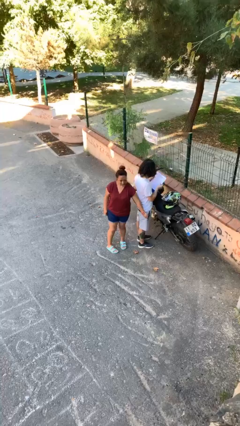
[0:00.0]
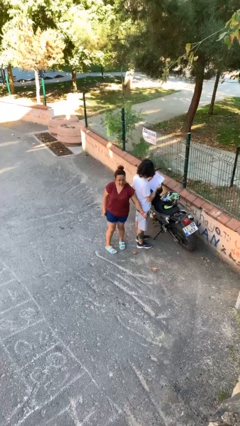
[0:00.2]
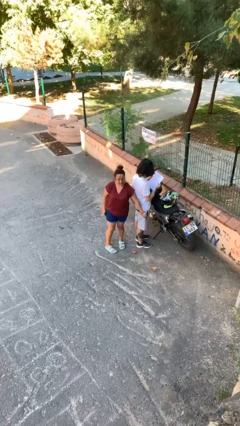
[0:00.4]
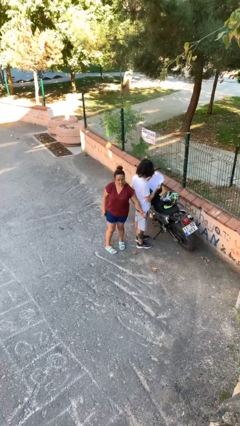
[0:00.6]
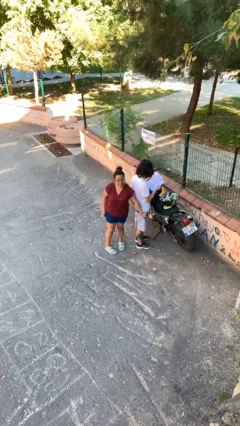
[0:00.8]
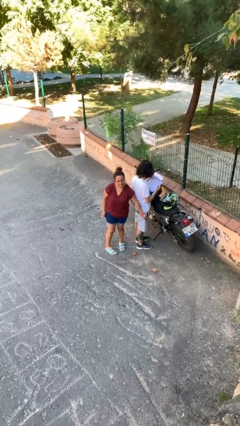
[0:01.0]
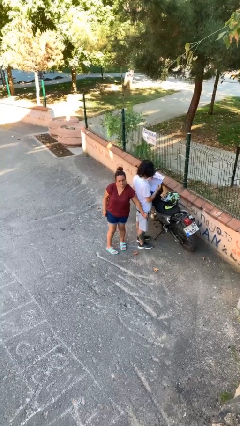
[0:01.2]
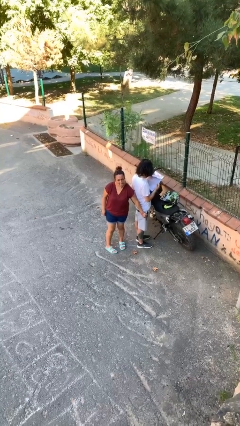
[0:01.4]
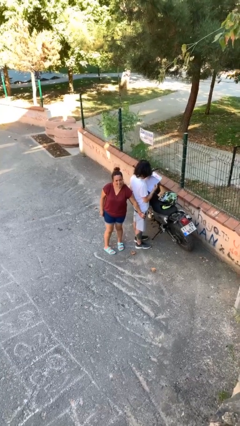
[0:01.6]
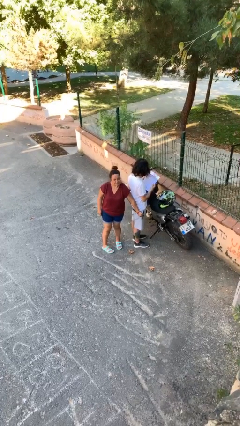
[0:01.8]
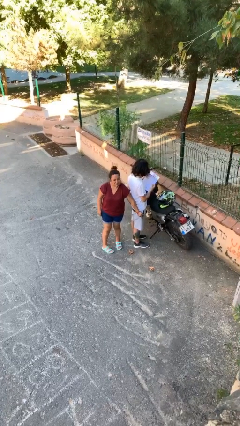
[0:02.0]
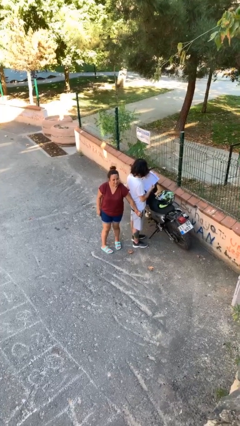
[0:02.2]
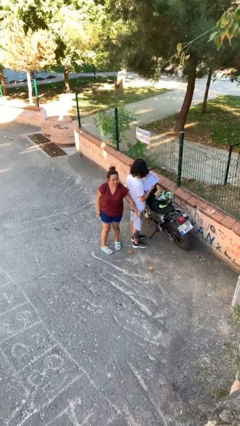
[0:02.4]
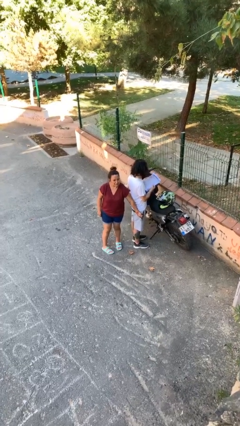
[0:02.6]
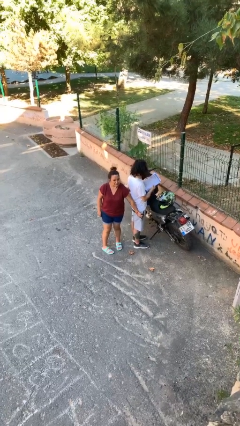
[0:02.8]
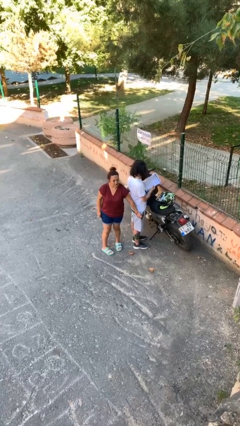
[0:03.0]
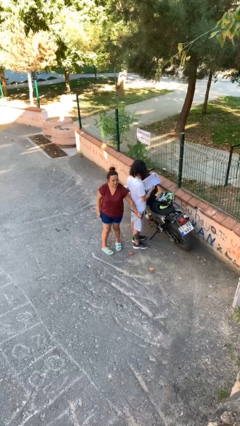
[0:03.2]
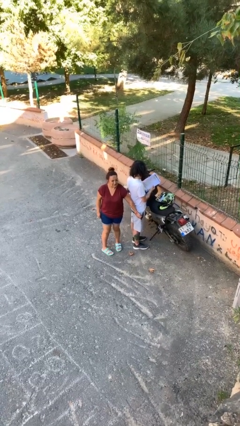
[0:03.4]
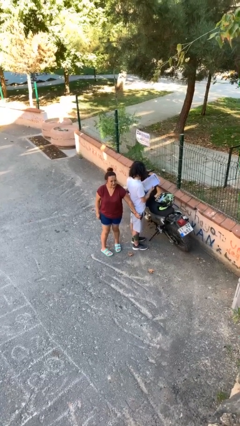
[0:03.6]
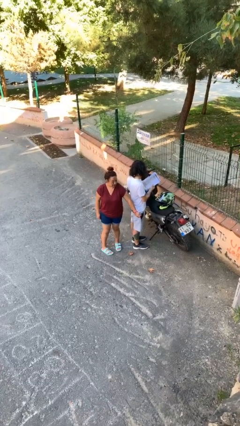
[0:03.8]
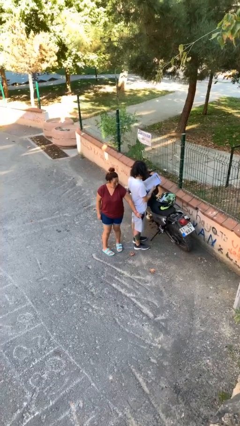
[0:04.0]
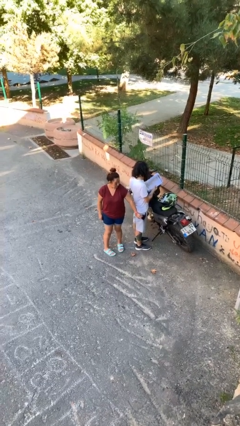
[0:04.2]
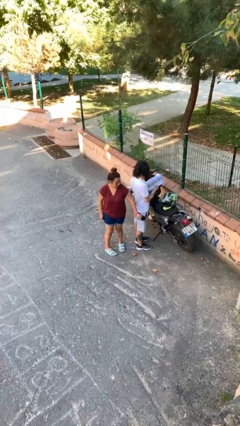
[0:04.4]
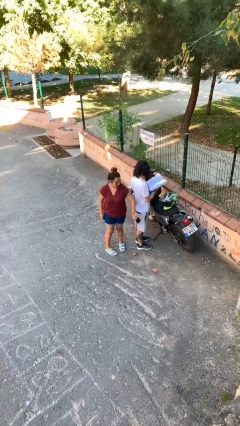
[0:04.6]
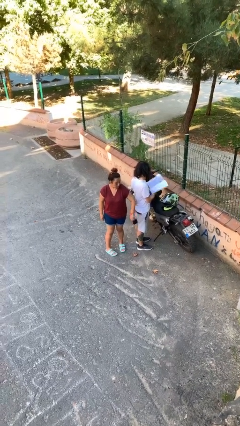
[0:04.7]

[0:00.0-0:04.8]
person steals object from person

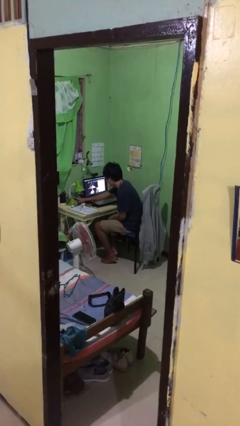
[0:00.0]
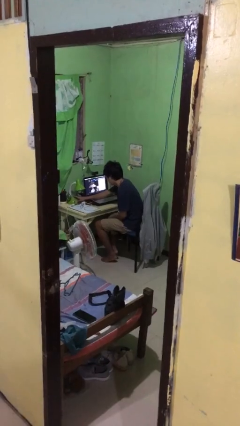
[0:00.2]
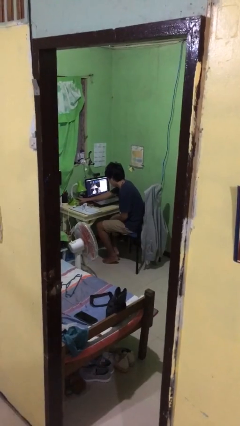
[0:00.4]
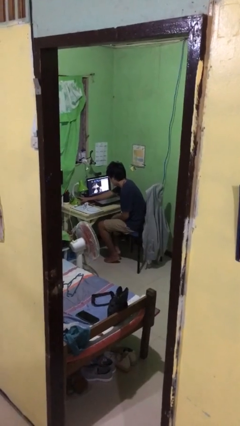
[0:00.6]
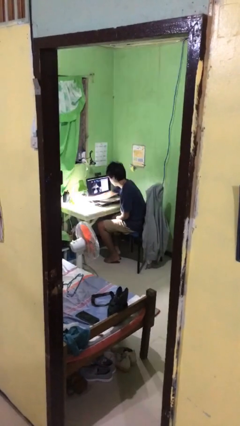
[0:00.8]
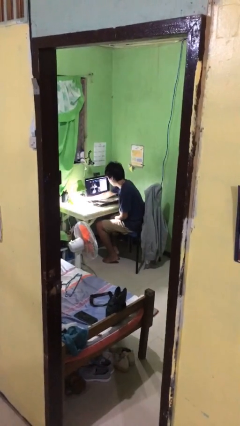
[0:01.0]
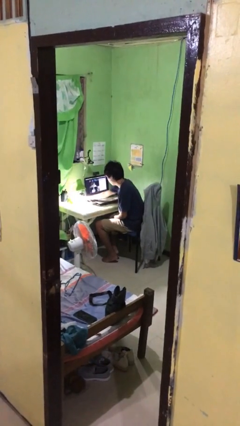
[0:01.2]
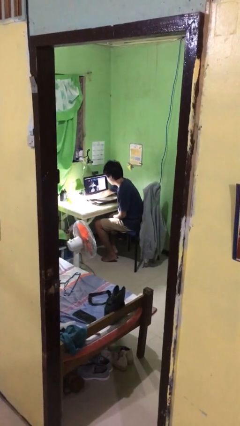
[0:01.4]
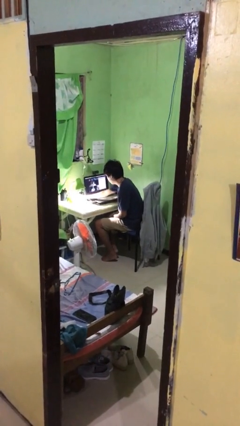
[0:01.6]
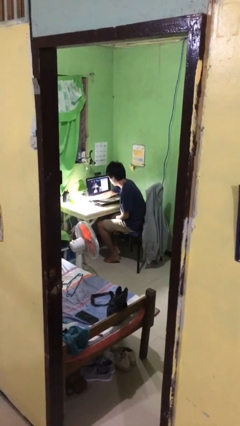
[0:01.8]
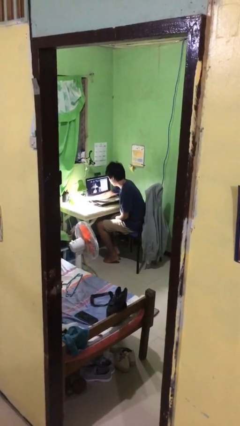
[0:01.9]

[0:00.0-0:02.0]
person turns on lamp

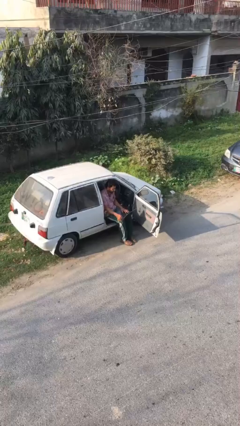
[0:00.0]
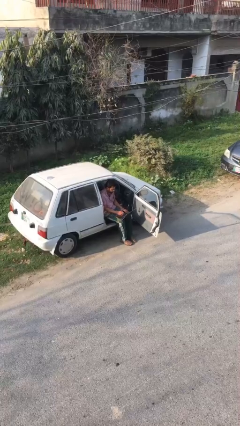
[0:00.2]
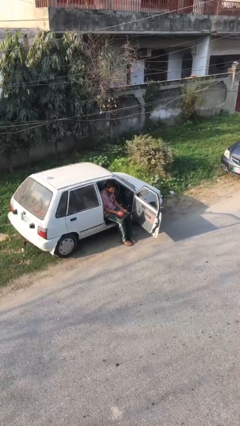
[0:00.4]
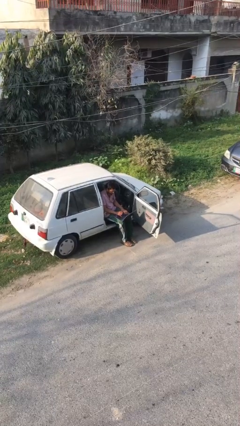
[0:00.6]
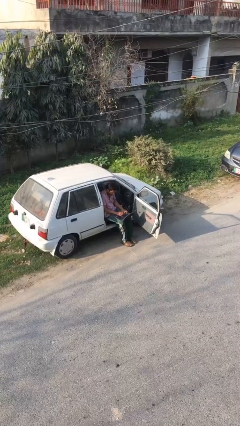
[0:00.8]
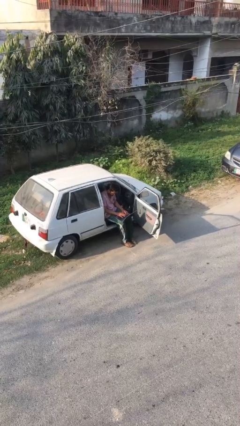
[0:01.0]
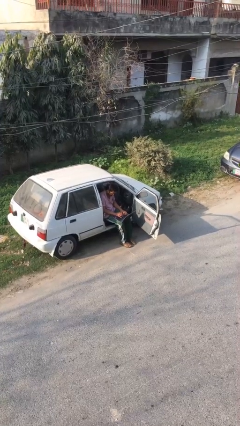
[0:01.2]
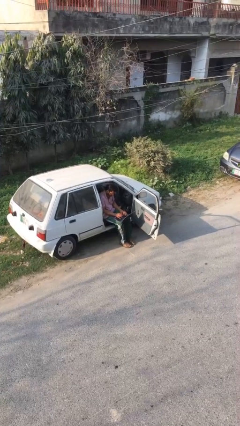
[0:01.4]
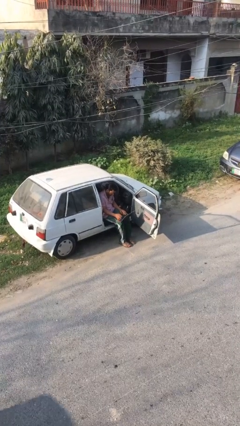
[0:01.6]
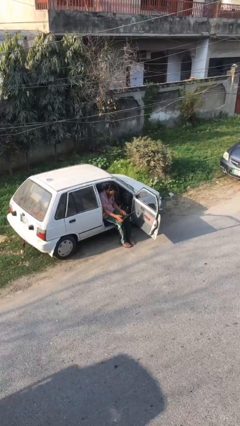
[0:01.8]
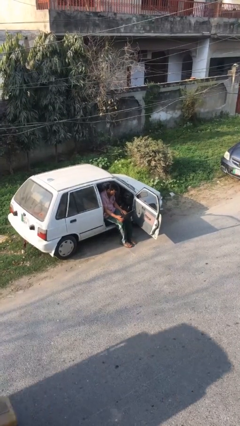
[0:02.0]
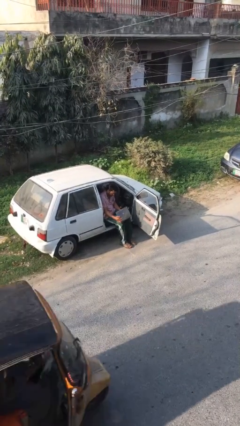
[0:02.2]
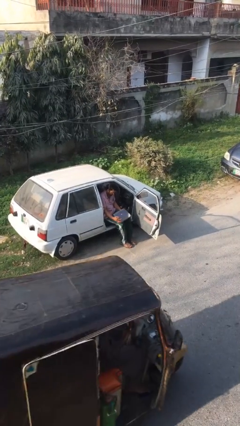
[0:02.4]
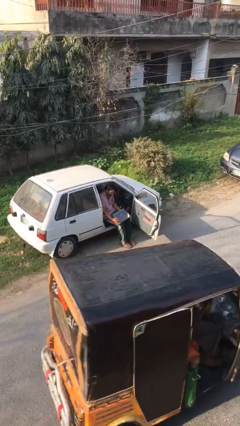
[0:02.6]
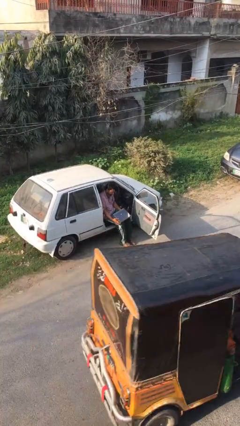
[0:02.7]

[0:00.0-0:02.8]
person interacts with laptop

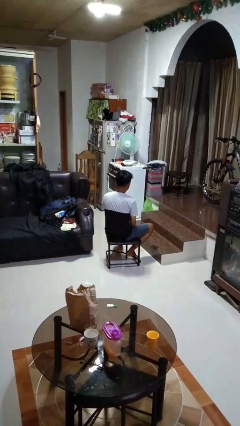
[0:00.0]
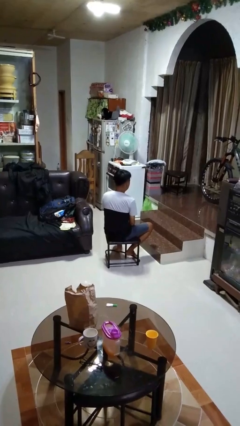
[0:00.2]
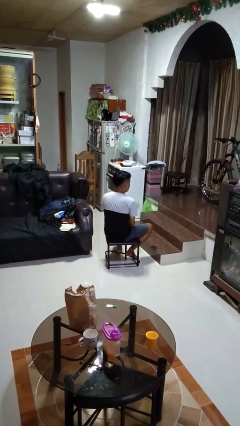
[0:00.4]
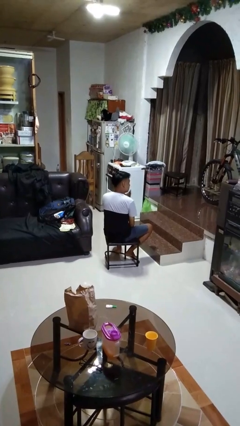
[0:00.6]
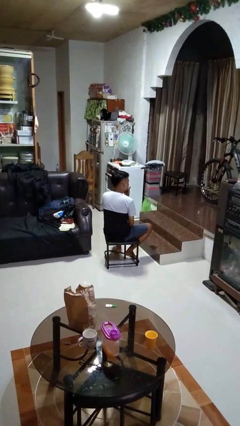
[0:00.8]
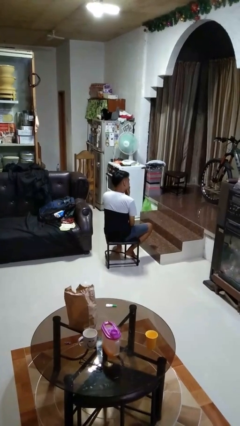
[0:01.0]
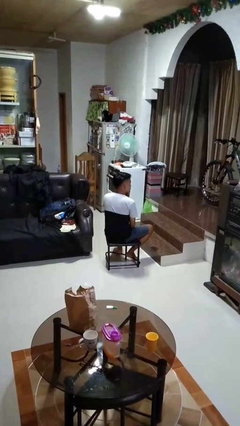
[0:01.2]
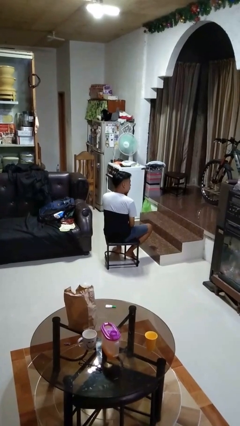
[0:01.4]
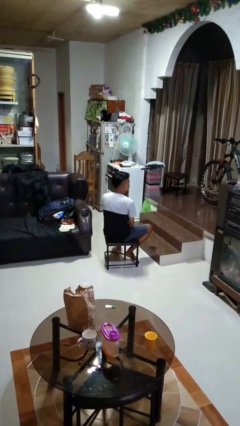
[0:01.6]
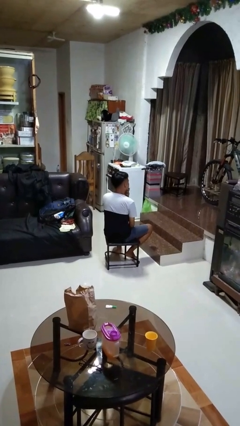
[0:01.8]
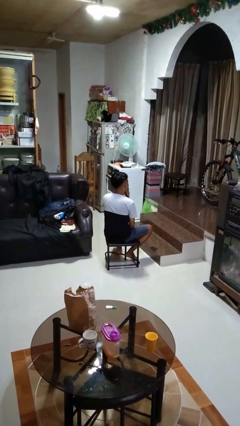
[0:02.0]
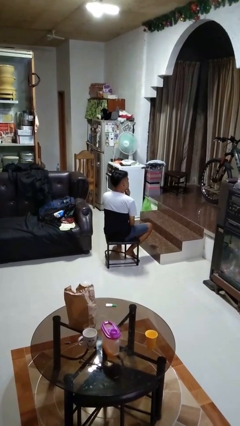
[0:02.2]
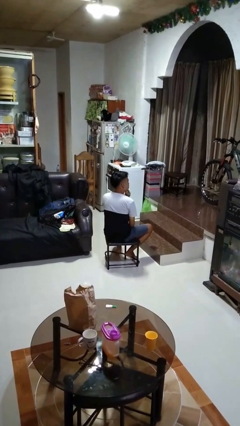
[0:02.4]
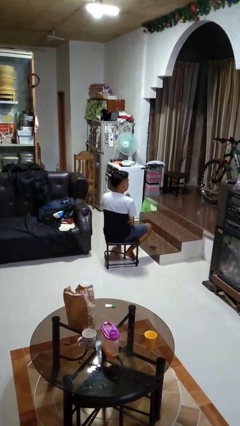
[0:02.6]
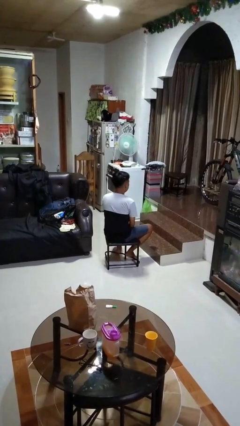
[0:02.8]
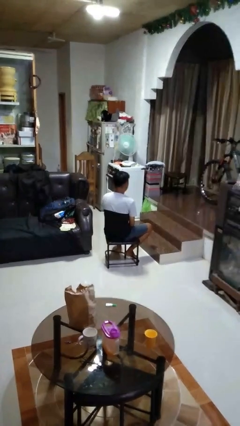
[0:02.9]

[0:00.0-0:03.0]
person strokes chin

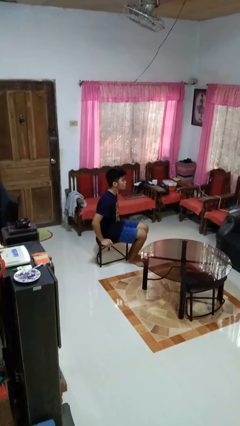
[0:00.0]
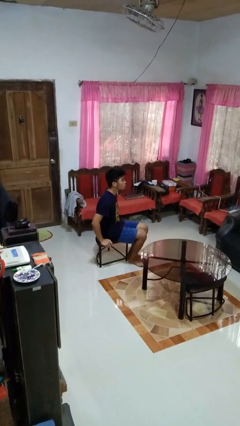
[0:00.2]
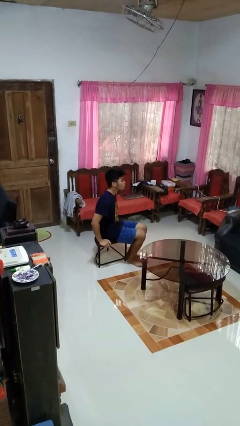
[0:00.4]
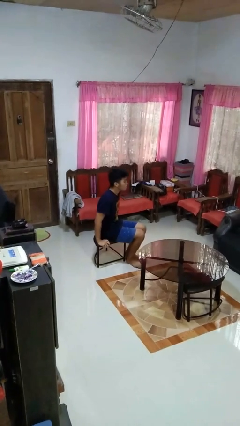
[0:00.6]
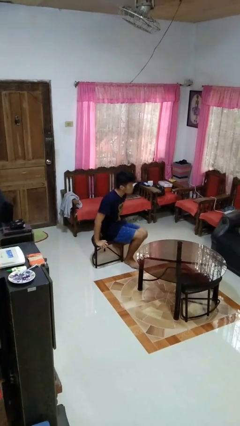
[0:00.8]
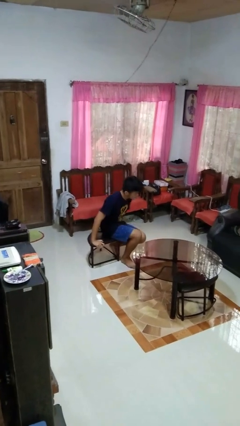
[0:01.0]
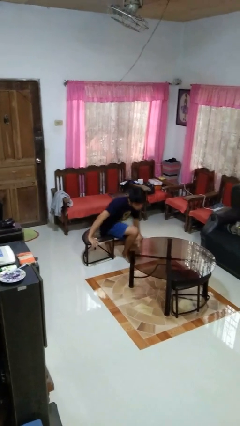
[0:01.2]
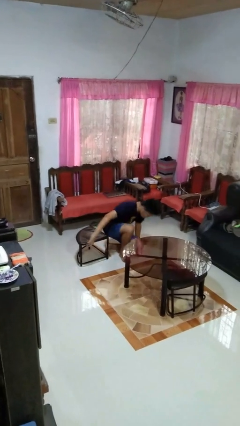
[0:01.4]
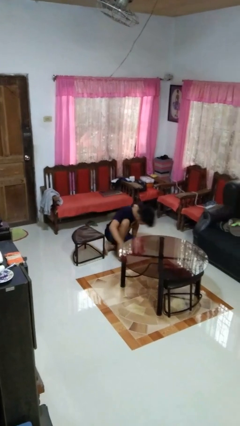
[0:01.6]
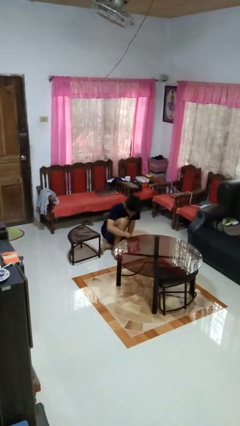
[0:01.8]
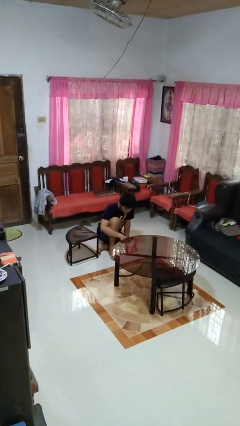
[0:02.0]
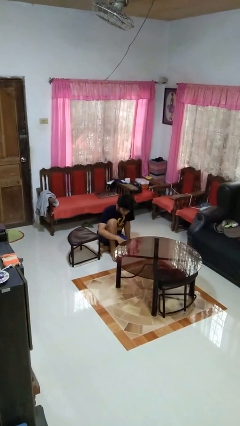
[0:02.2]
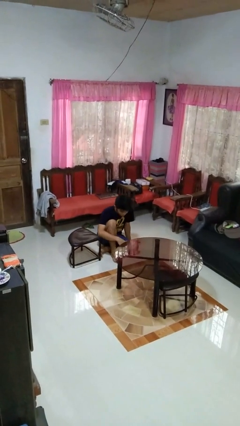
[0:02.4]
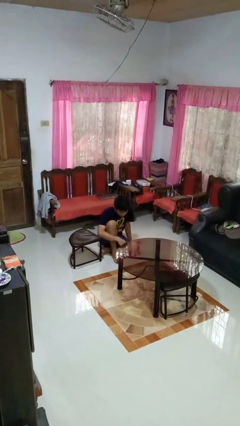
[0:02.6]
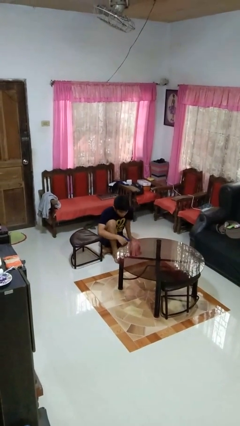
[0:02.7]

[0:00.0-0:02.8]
person falls from chair
